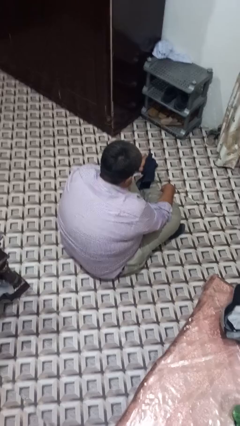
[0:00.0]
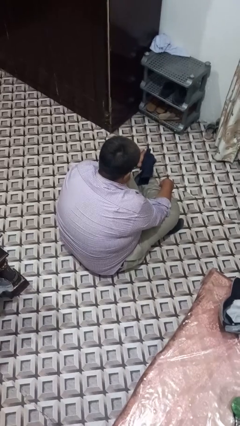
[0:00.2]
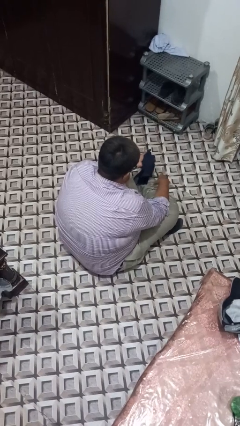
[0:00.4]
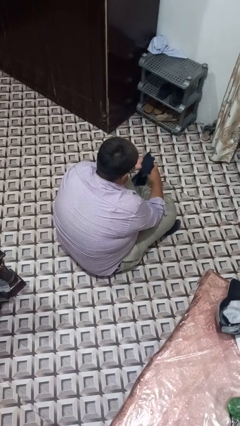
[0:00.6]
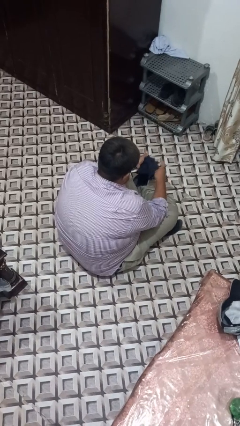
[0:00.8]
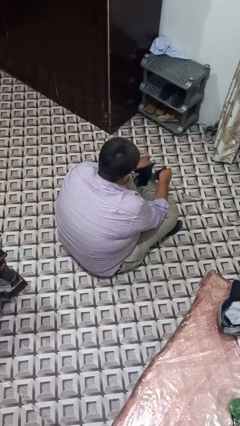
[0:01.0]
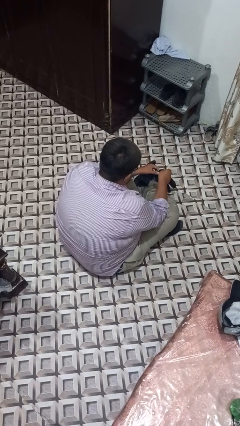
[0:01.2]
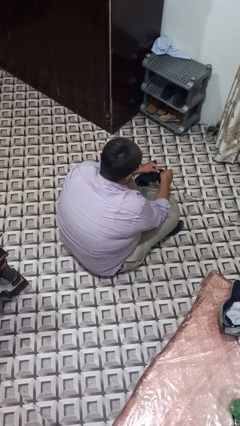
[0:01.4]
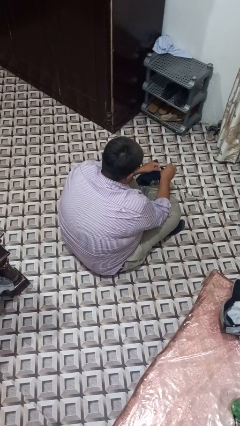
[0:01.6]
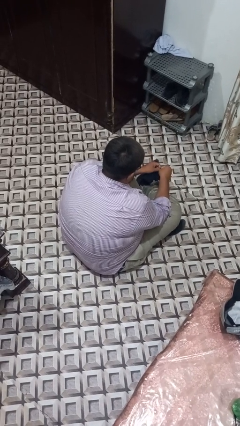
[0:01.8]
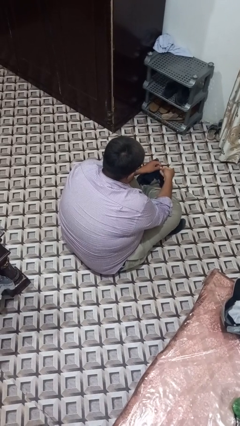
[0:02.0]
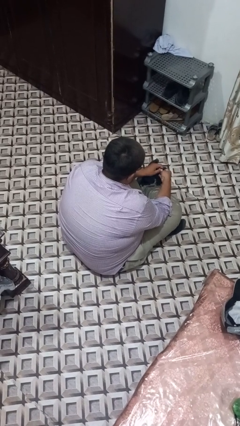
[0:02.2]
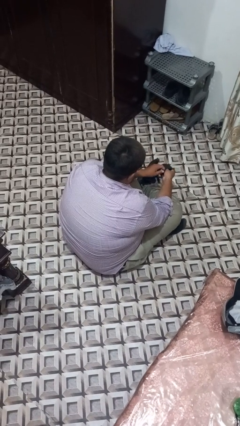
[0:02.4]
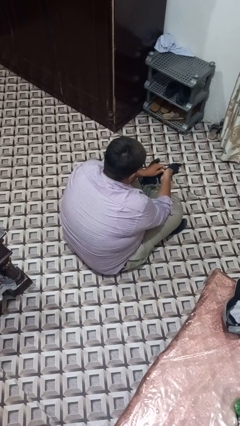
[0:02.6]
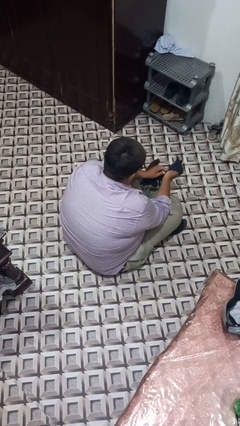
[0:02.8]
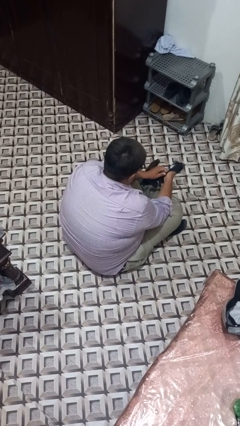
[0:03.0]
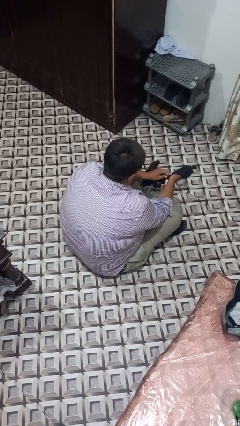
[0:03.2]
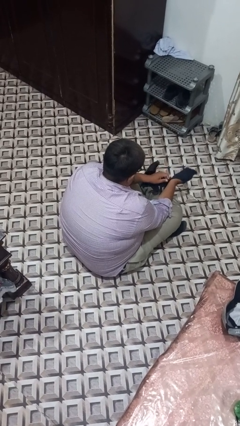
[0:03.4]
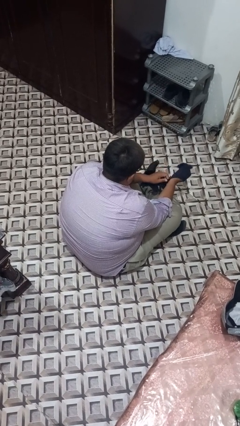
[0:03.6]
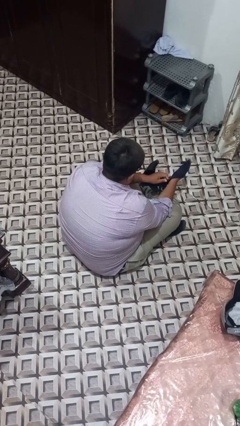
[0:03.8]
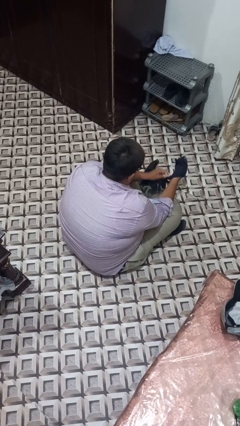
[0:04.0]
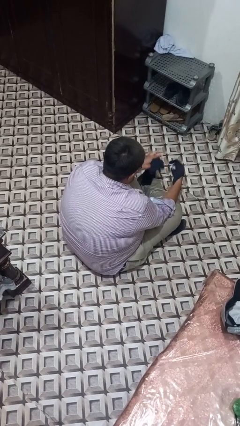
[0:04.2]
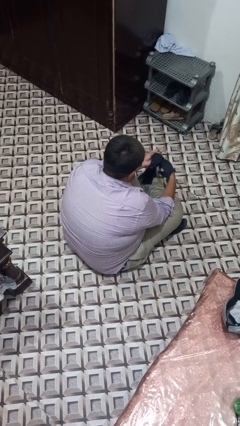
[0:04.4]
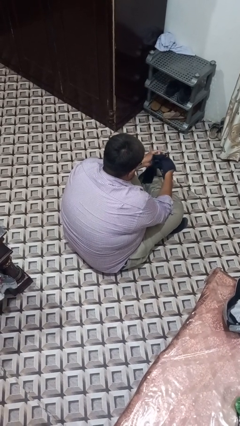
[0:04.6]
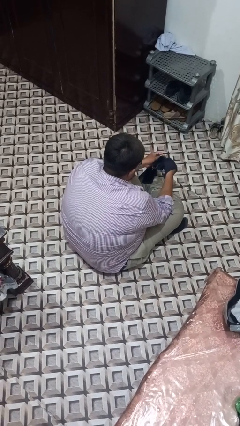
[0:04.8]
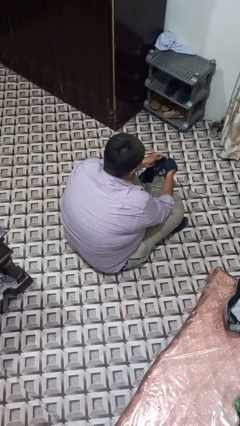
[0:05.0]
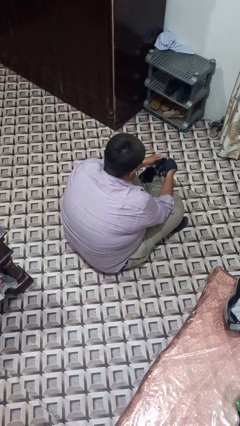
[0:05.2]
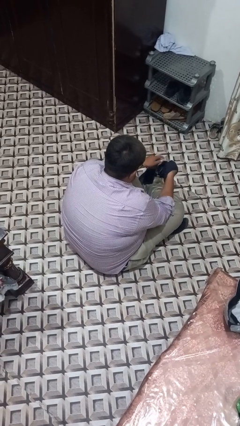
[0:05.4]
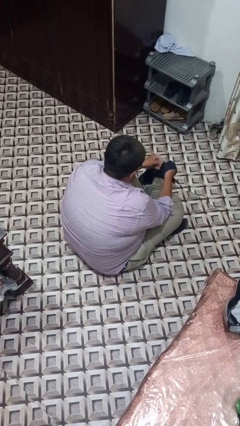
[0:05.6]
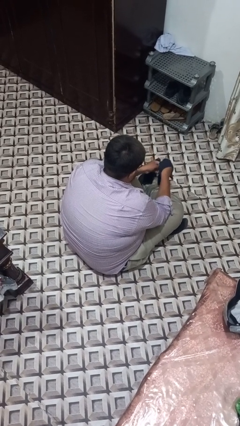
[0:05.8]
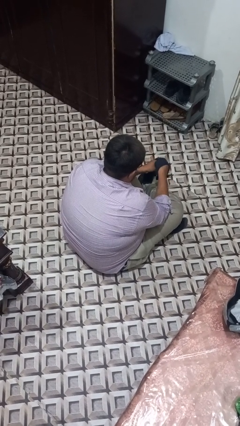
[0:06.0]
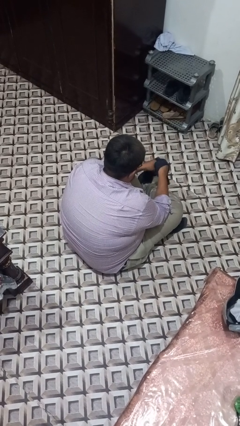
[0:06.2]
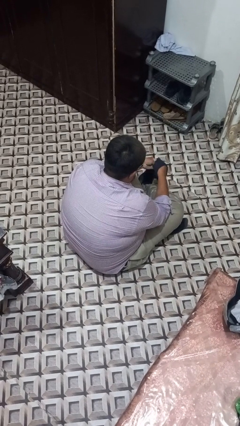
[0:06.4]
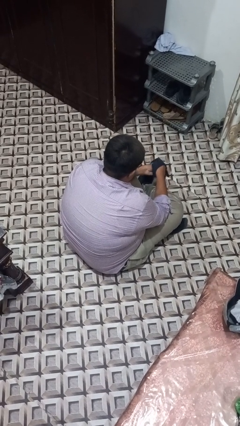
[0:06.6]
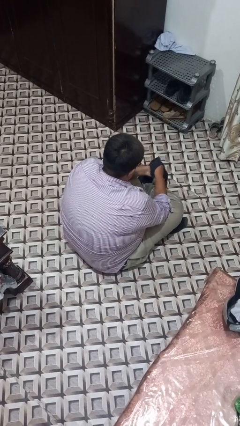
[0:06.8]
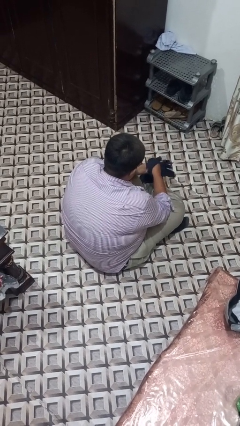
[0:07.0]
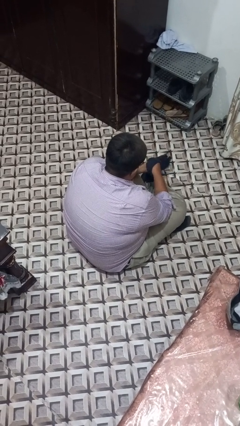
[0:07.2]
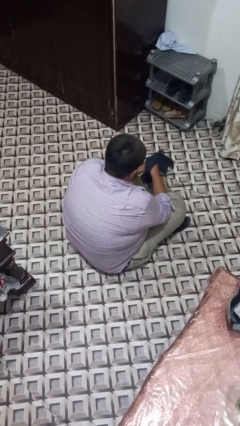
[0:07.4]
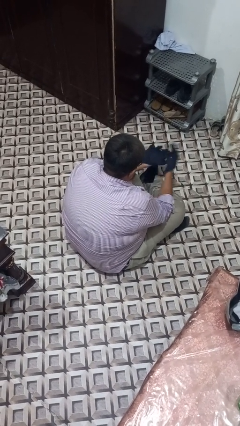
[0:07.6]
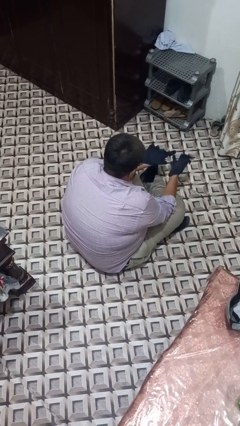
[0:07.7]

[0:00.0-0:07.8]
person puts on gloves

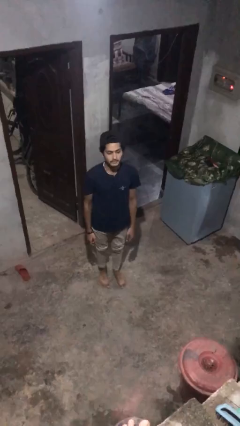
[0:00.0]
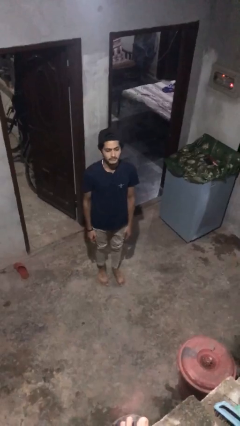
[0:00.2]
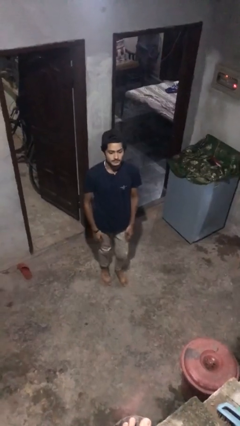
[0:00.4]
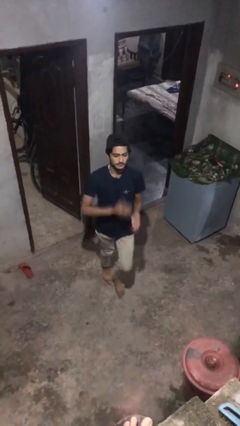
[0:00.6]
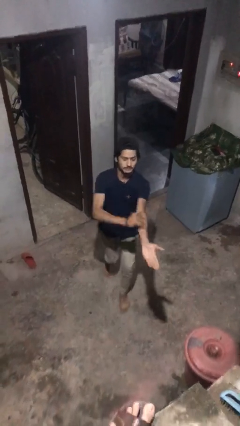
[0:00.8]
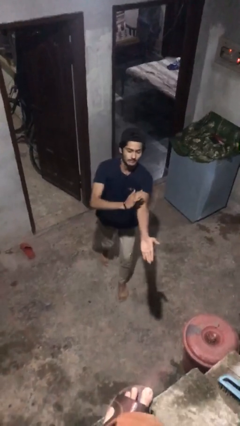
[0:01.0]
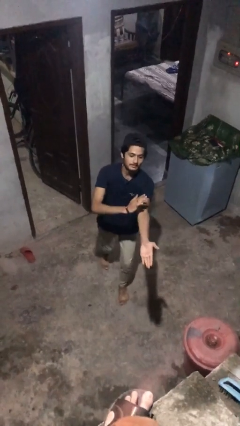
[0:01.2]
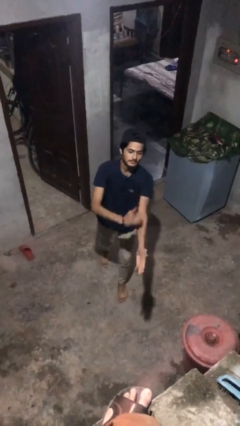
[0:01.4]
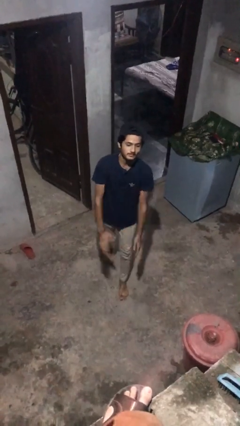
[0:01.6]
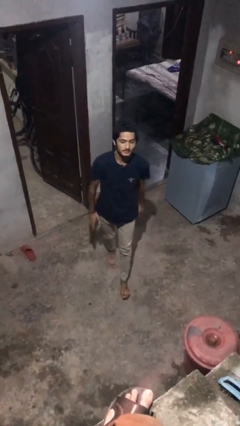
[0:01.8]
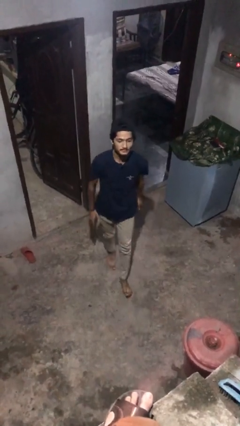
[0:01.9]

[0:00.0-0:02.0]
person karate chop

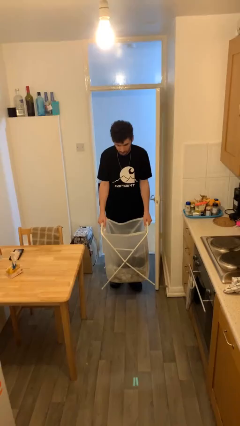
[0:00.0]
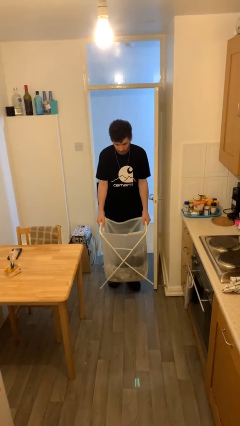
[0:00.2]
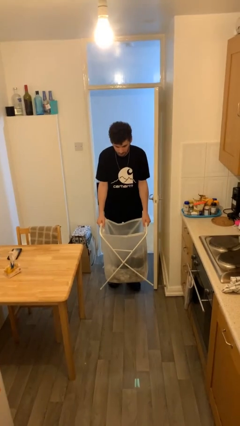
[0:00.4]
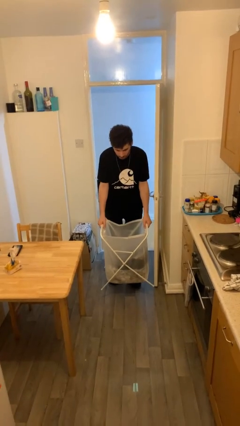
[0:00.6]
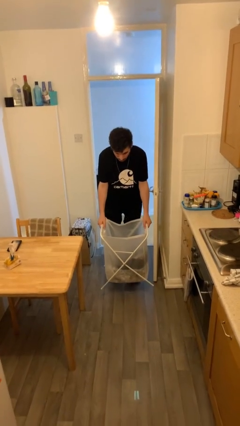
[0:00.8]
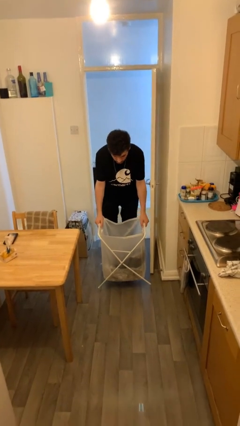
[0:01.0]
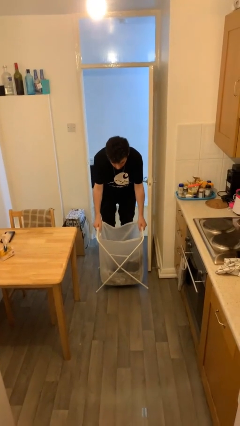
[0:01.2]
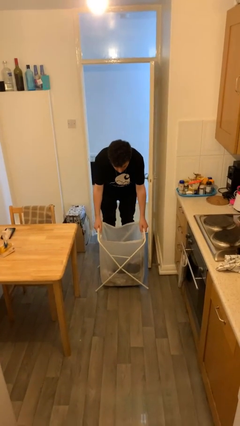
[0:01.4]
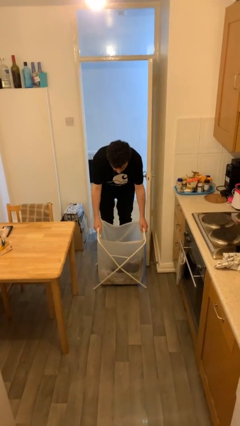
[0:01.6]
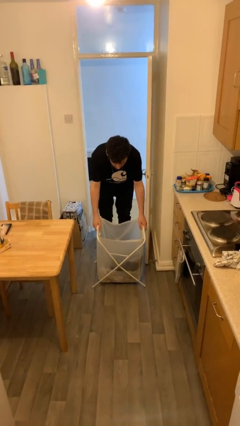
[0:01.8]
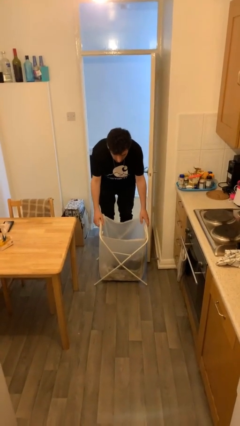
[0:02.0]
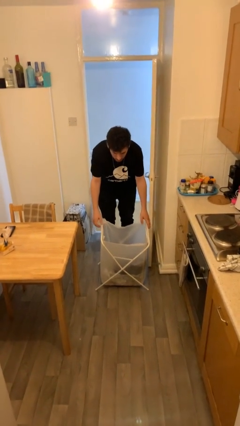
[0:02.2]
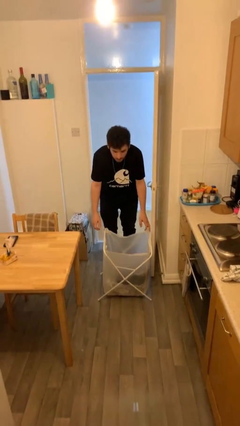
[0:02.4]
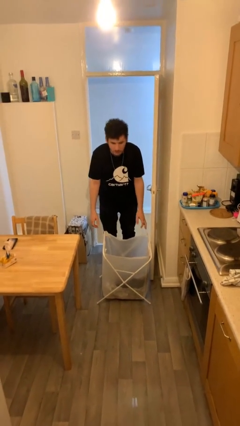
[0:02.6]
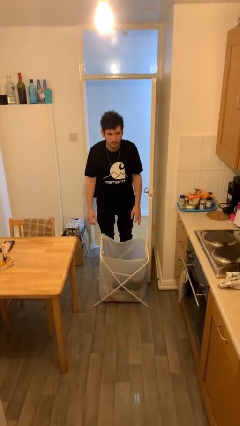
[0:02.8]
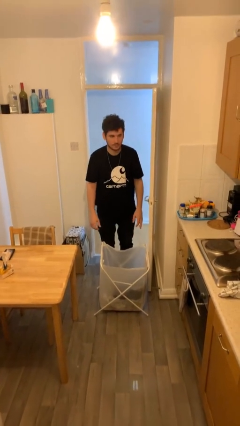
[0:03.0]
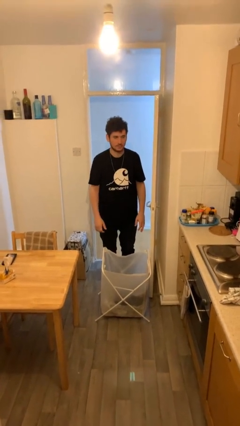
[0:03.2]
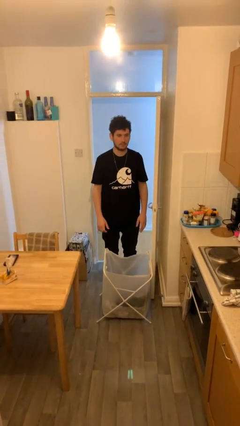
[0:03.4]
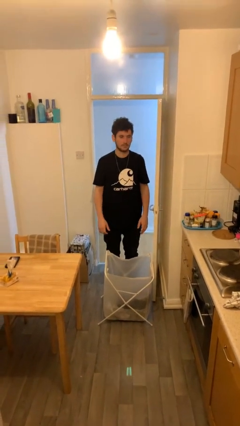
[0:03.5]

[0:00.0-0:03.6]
person puts down object on floor

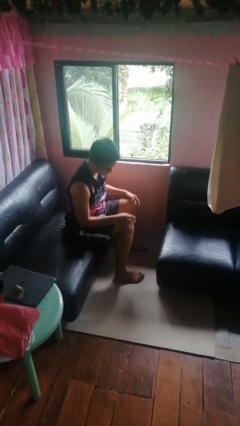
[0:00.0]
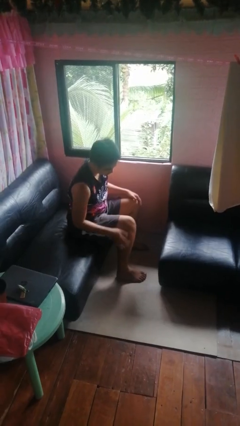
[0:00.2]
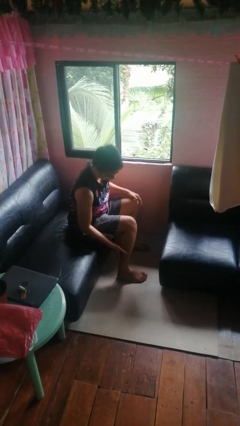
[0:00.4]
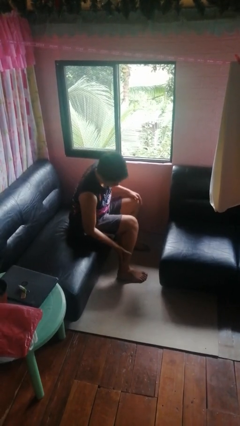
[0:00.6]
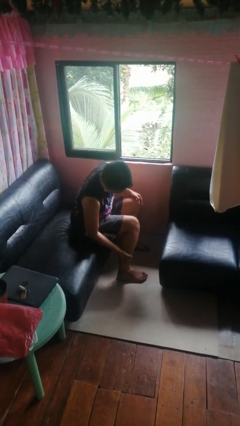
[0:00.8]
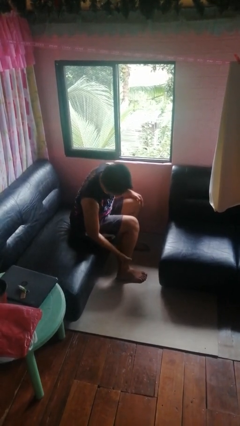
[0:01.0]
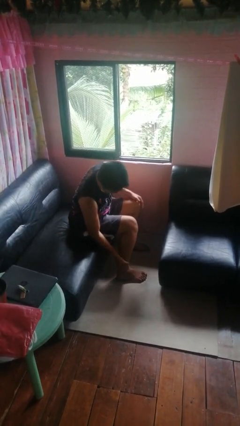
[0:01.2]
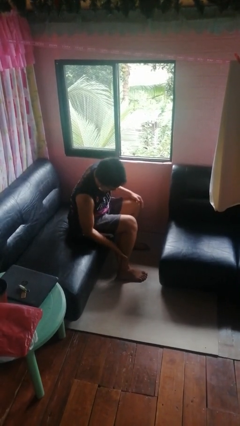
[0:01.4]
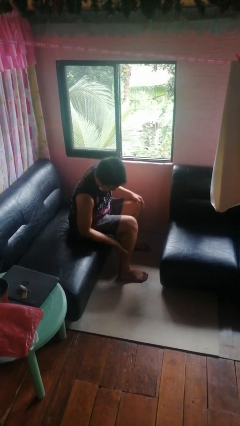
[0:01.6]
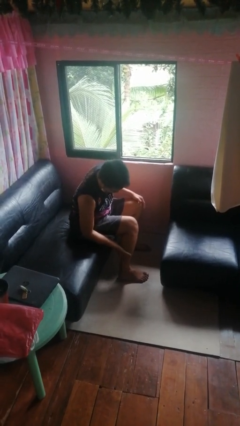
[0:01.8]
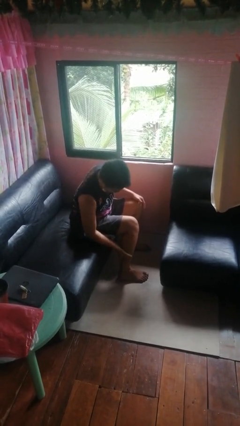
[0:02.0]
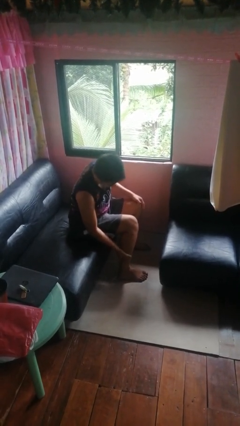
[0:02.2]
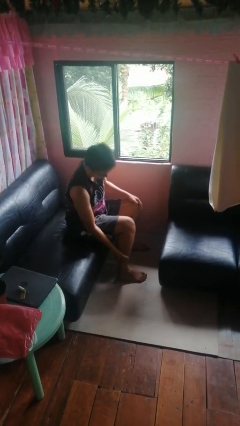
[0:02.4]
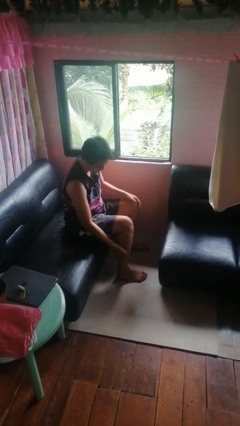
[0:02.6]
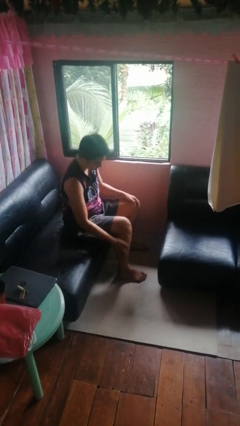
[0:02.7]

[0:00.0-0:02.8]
person rubs foot

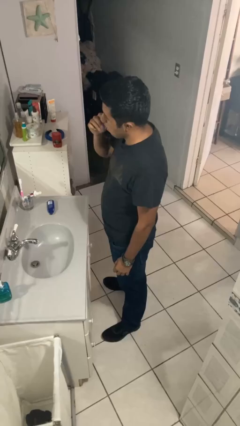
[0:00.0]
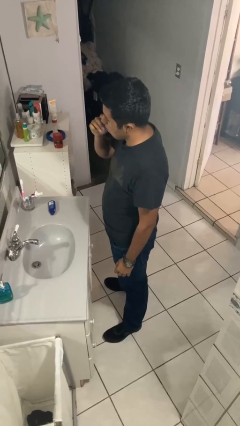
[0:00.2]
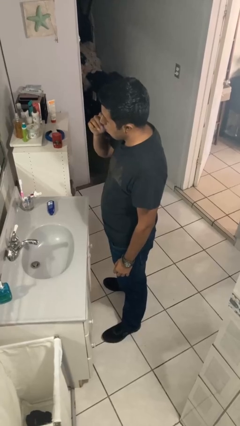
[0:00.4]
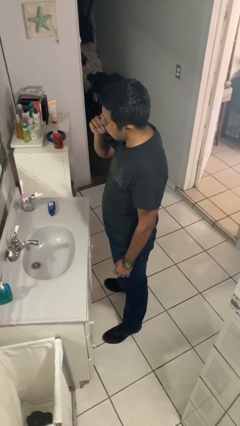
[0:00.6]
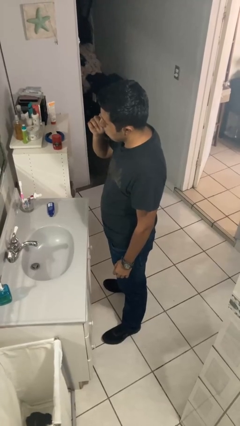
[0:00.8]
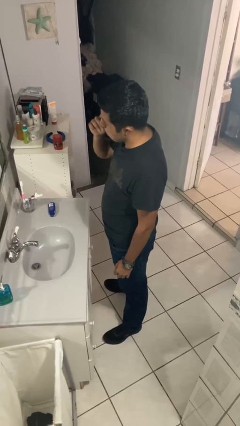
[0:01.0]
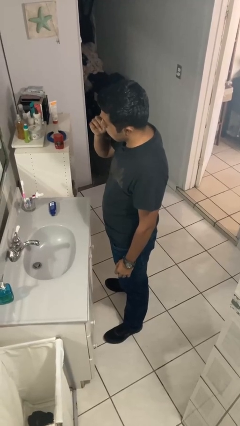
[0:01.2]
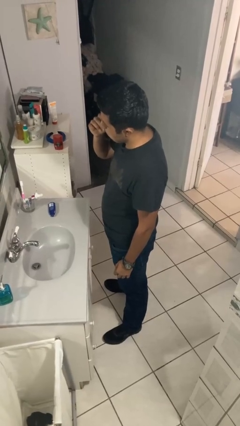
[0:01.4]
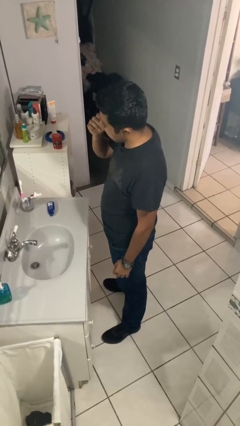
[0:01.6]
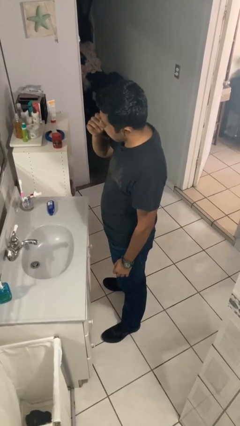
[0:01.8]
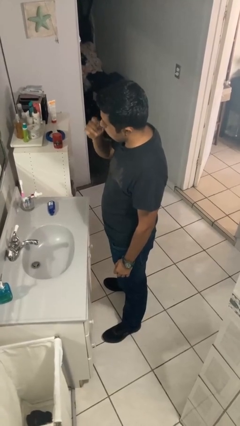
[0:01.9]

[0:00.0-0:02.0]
person flosses
